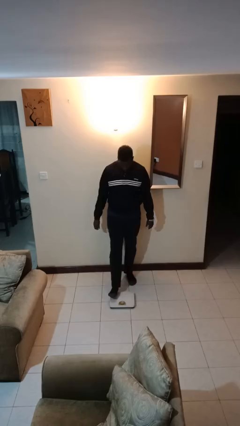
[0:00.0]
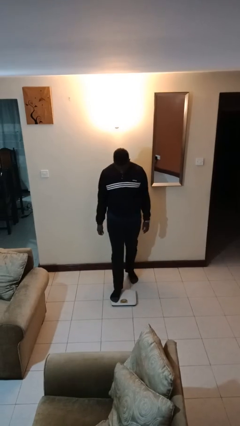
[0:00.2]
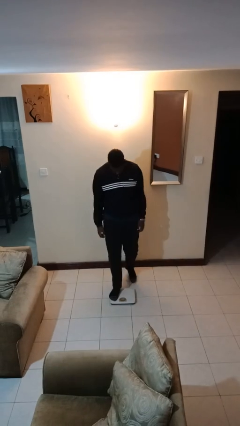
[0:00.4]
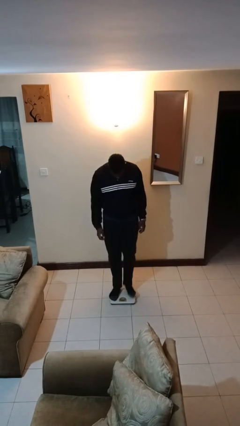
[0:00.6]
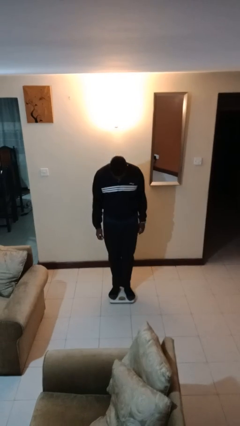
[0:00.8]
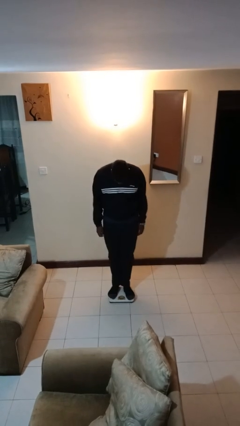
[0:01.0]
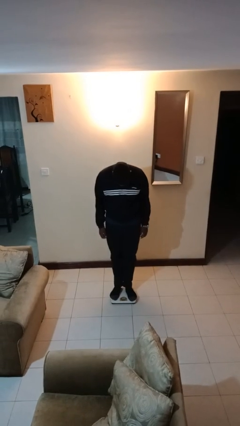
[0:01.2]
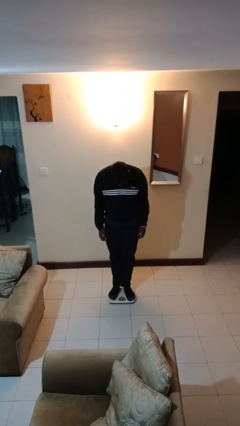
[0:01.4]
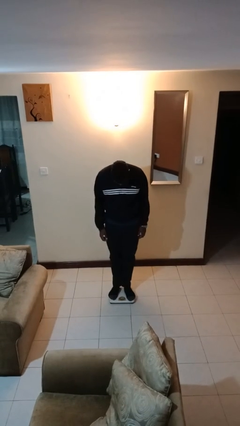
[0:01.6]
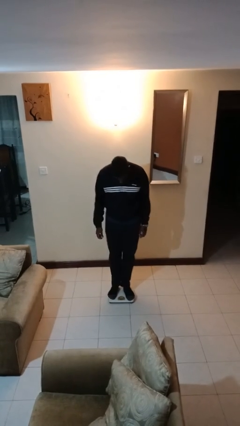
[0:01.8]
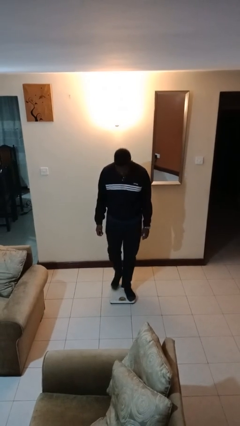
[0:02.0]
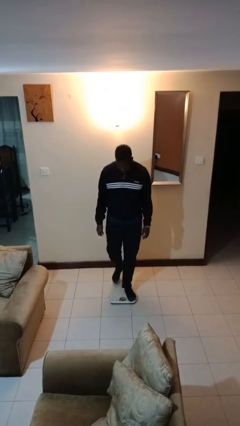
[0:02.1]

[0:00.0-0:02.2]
person uses bodyweight scale

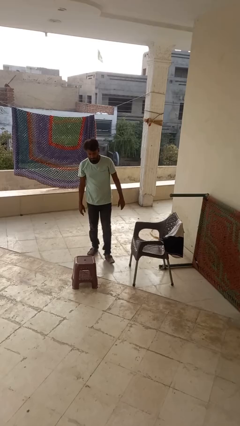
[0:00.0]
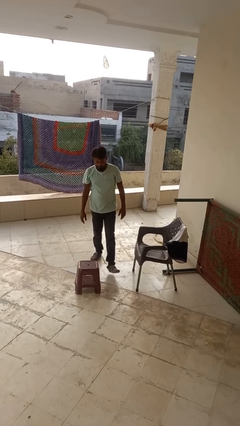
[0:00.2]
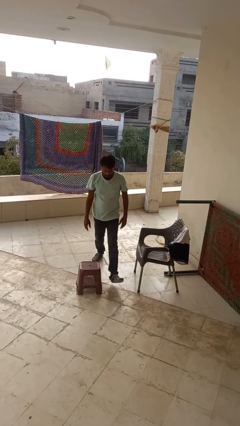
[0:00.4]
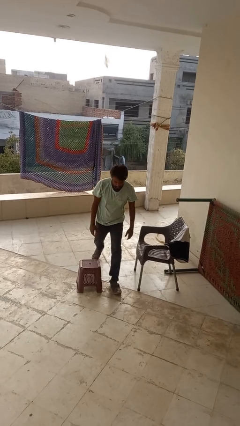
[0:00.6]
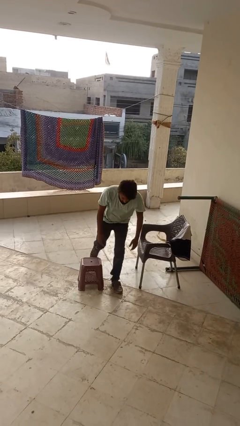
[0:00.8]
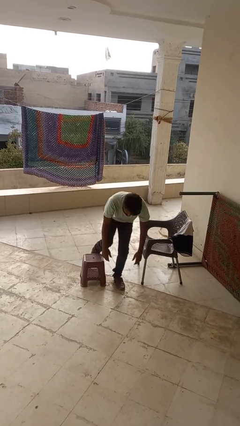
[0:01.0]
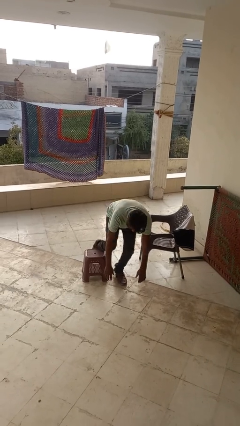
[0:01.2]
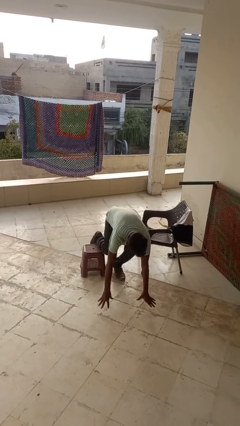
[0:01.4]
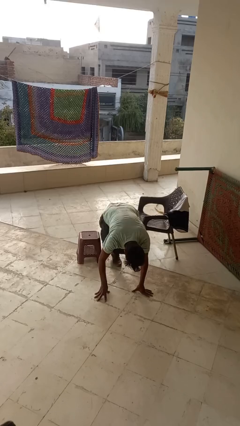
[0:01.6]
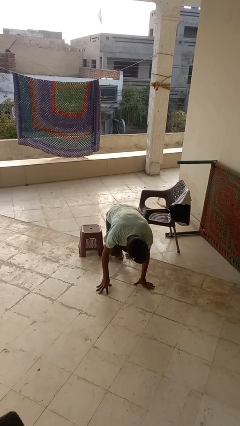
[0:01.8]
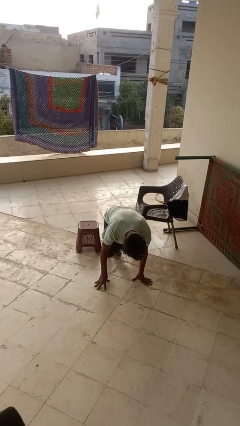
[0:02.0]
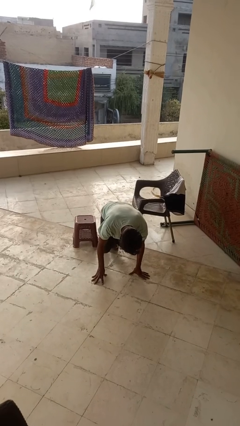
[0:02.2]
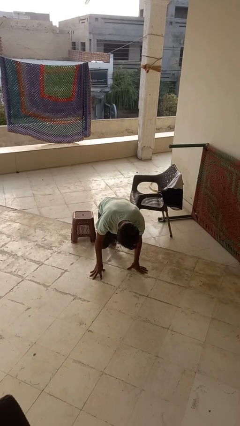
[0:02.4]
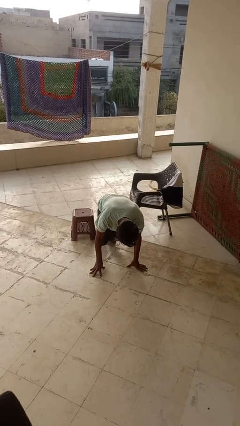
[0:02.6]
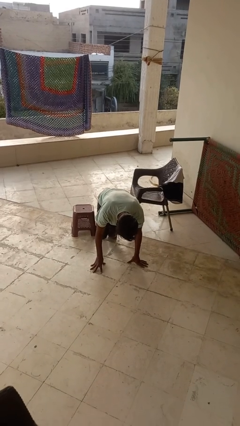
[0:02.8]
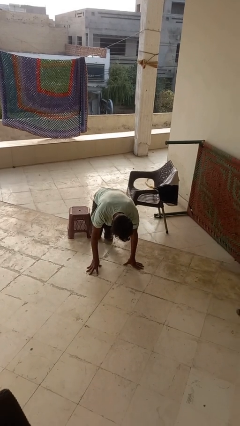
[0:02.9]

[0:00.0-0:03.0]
person trips on object on floor

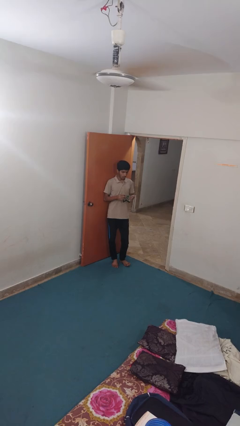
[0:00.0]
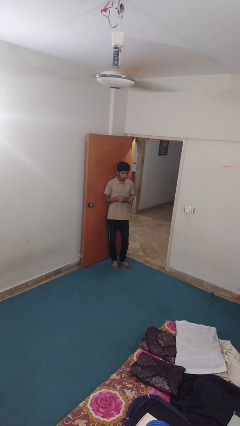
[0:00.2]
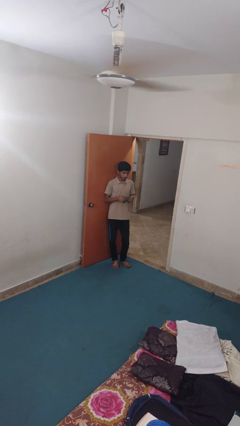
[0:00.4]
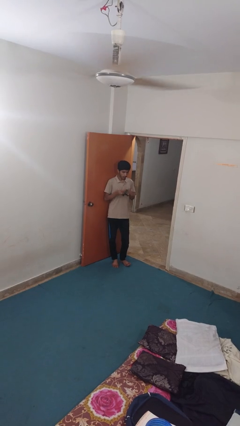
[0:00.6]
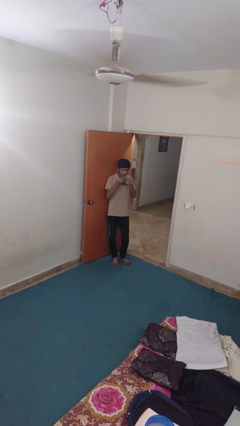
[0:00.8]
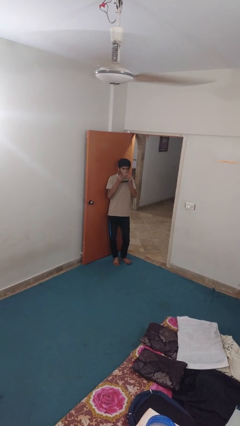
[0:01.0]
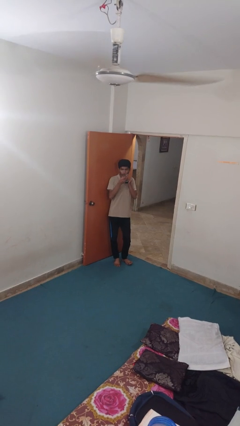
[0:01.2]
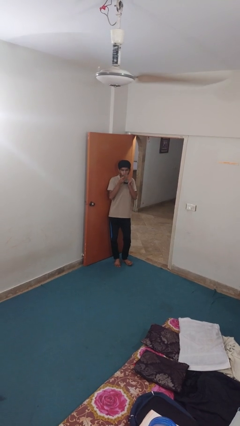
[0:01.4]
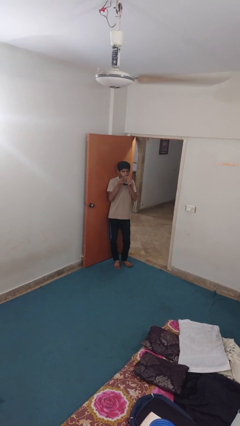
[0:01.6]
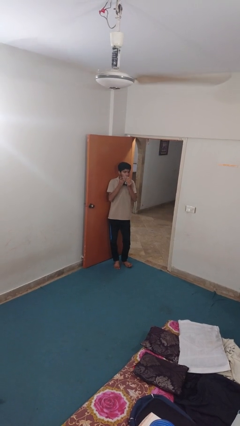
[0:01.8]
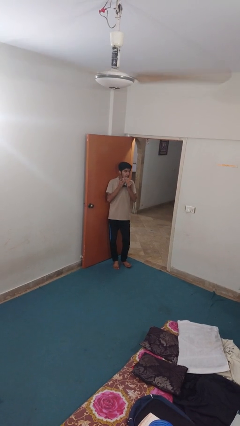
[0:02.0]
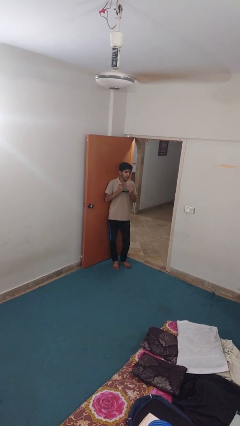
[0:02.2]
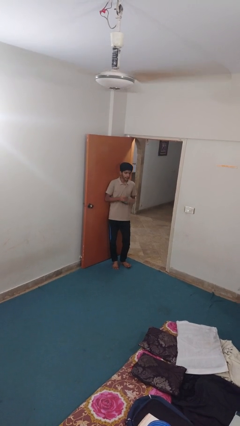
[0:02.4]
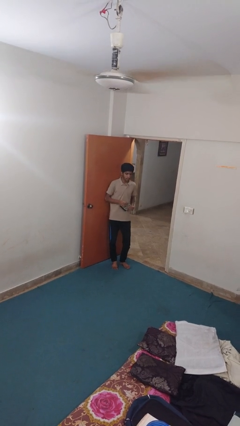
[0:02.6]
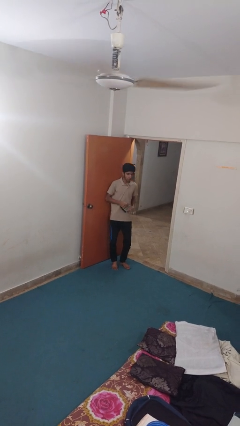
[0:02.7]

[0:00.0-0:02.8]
person wipes mouth with napkin

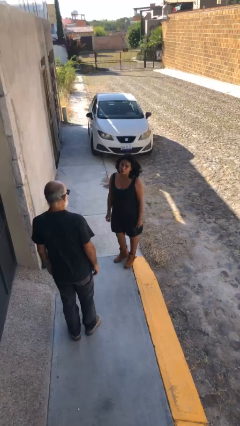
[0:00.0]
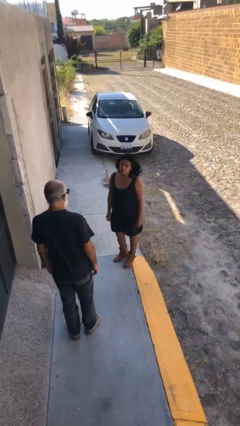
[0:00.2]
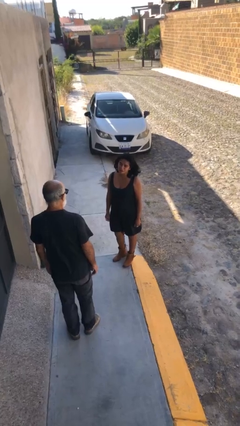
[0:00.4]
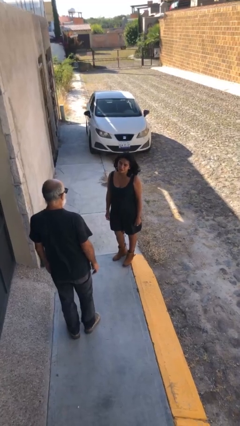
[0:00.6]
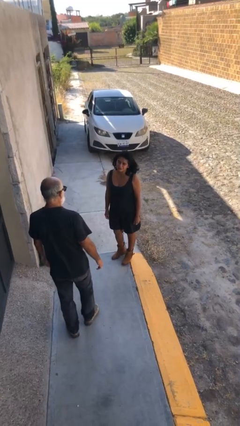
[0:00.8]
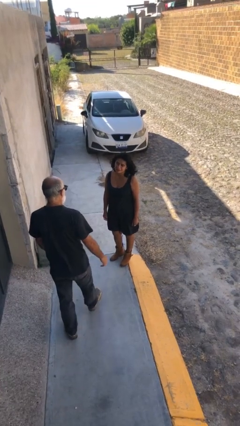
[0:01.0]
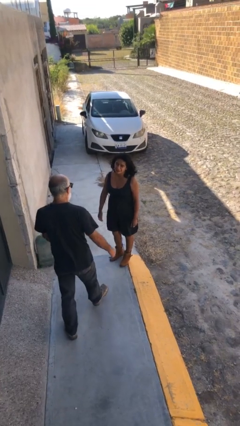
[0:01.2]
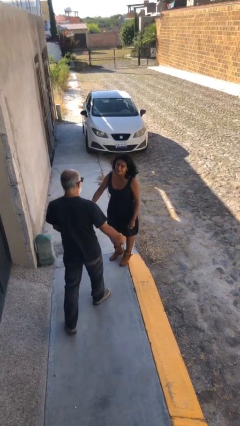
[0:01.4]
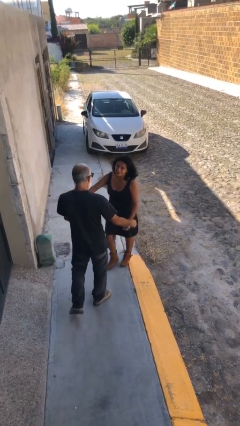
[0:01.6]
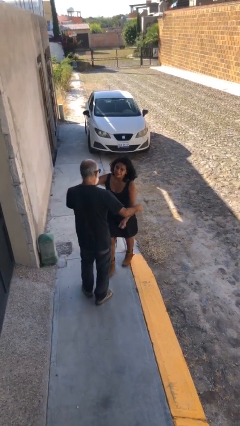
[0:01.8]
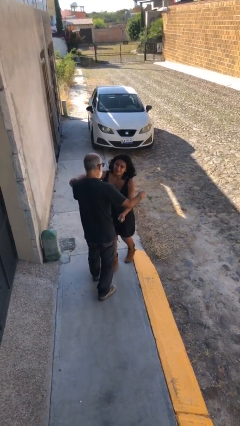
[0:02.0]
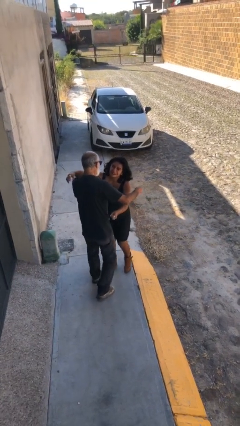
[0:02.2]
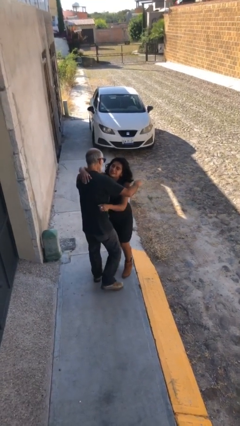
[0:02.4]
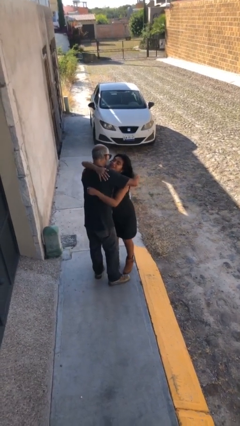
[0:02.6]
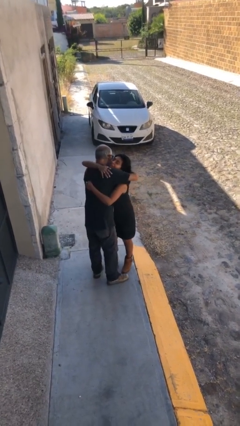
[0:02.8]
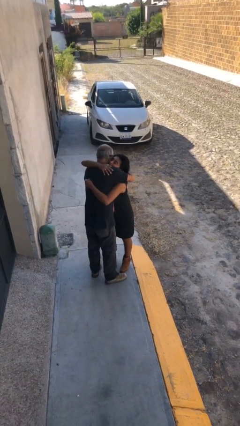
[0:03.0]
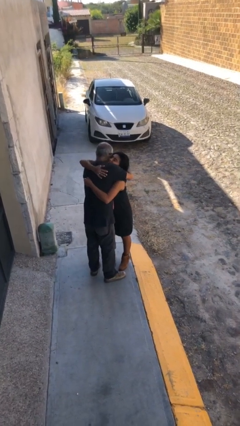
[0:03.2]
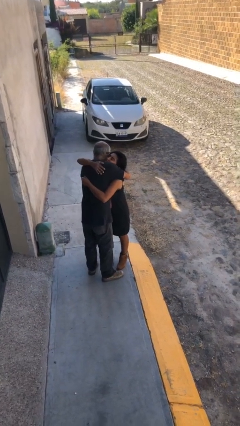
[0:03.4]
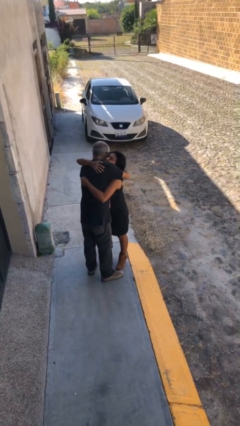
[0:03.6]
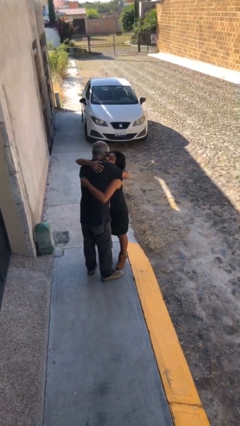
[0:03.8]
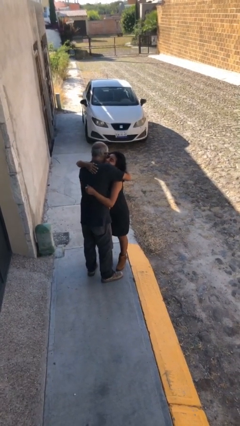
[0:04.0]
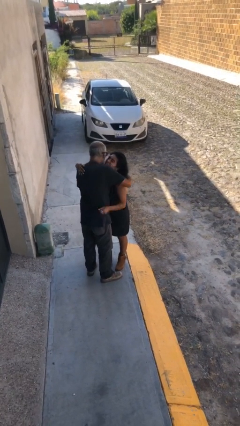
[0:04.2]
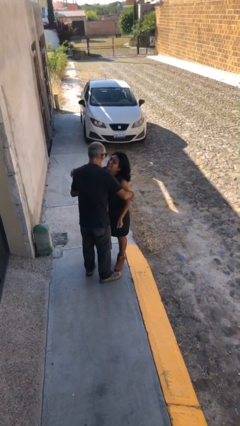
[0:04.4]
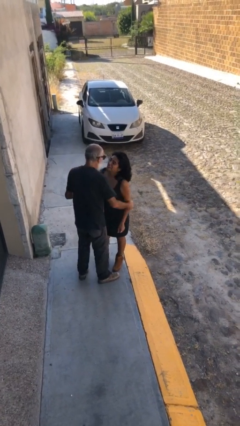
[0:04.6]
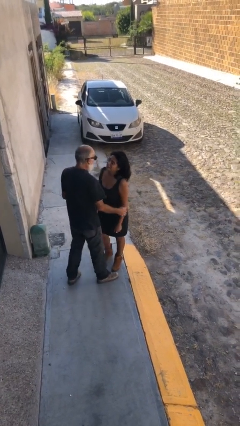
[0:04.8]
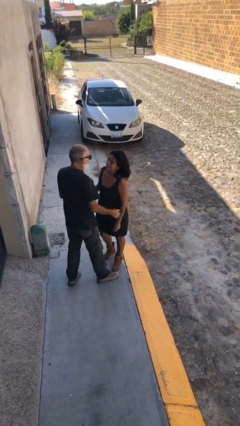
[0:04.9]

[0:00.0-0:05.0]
person embraces person

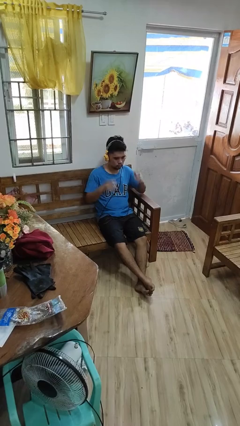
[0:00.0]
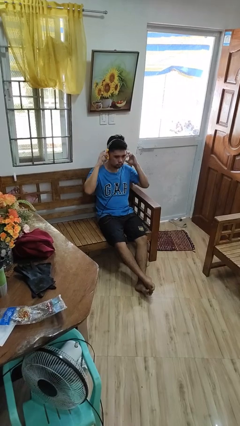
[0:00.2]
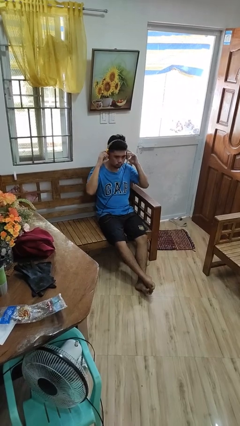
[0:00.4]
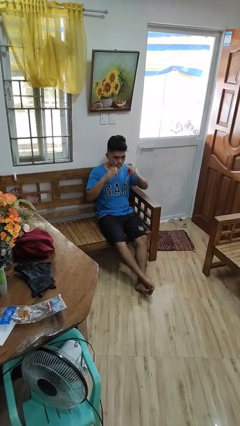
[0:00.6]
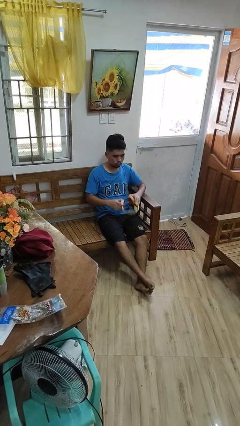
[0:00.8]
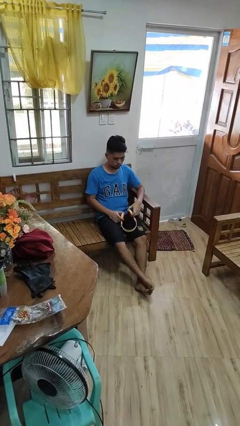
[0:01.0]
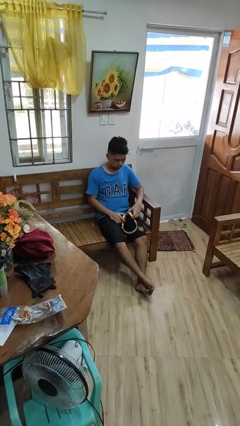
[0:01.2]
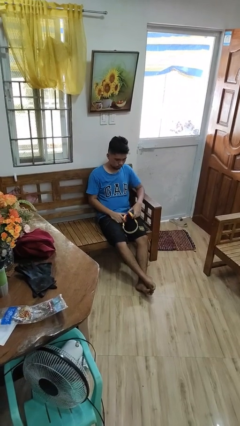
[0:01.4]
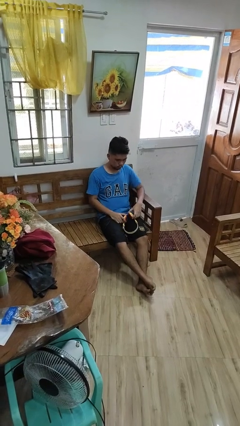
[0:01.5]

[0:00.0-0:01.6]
person takes off headphones

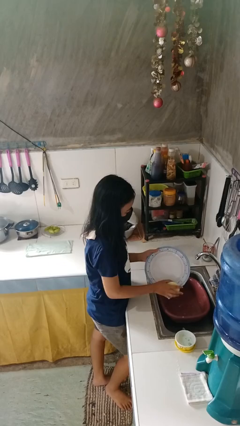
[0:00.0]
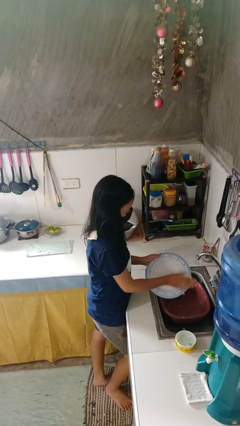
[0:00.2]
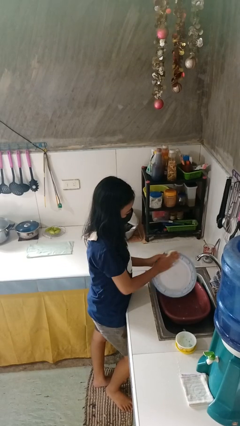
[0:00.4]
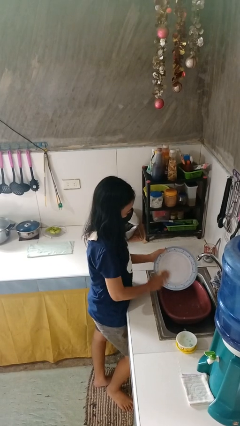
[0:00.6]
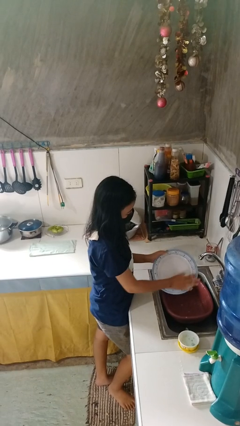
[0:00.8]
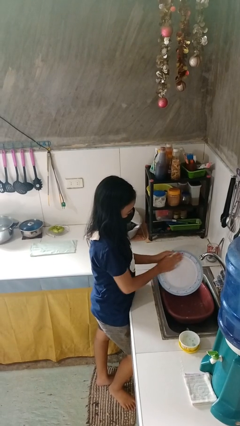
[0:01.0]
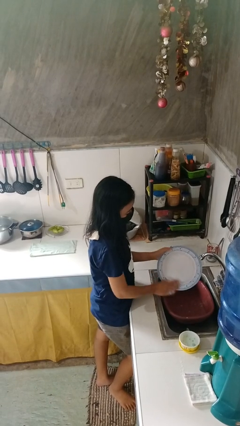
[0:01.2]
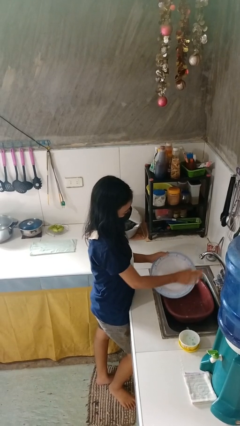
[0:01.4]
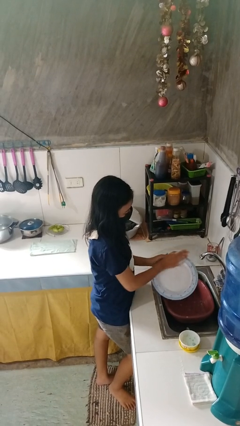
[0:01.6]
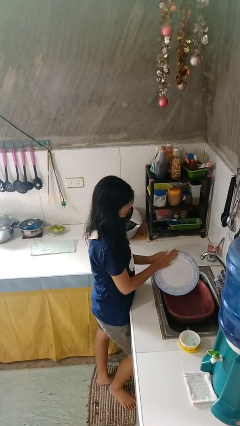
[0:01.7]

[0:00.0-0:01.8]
person washes dish

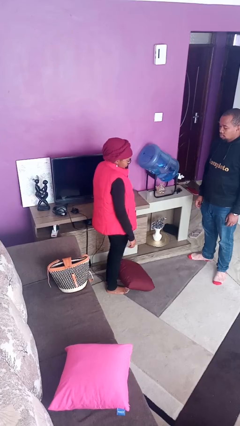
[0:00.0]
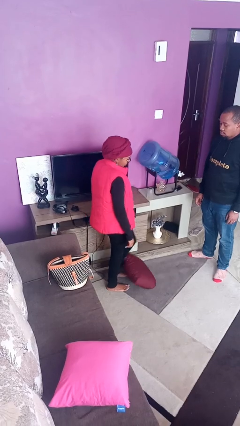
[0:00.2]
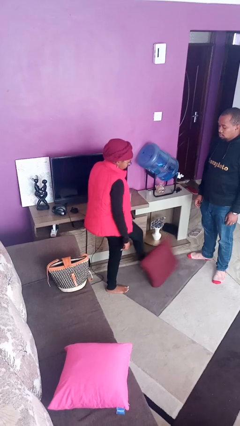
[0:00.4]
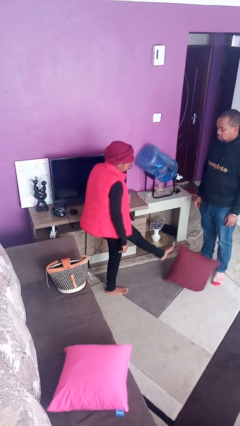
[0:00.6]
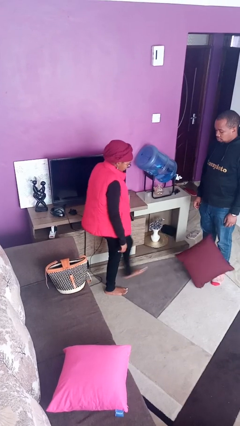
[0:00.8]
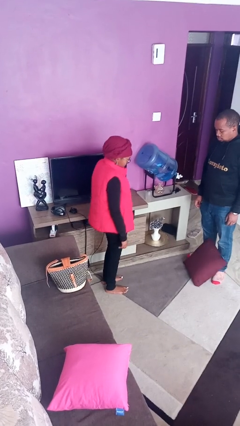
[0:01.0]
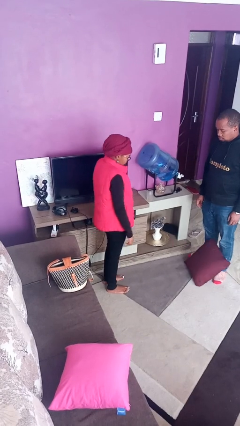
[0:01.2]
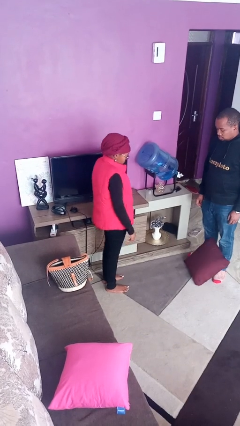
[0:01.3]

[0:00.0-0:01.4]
person kicks object to person
